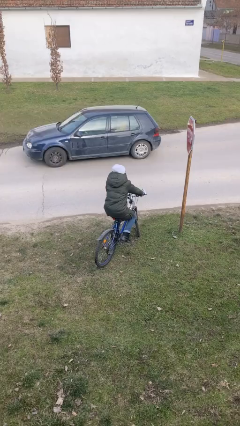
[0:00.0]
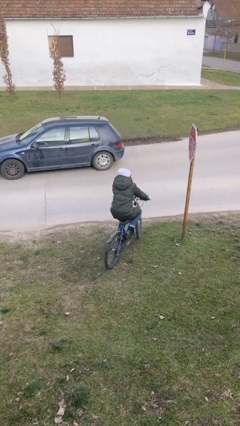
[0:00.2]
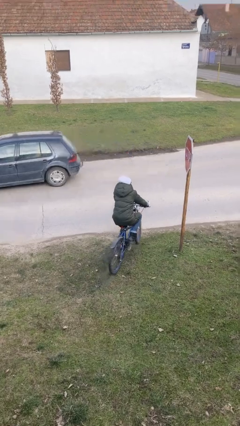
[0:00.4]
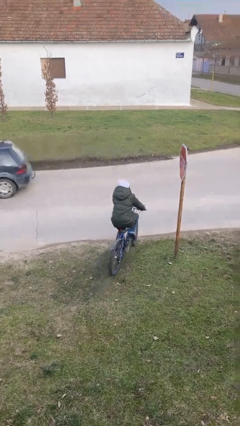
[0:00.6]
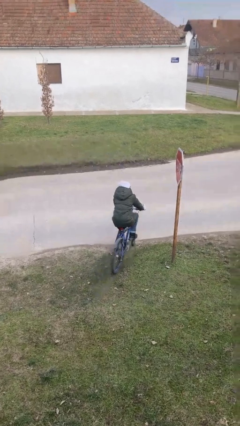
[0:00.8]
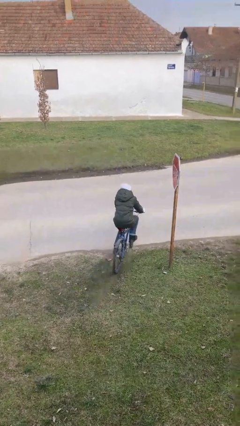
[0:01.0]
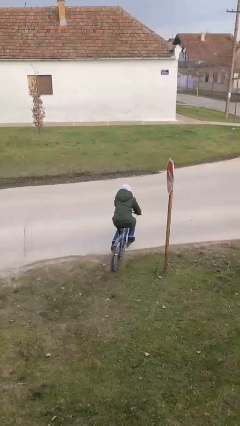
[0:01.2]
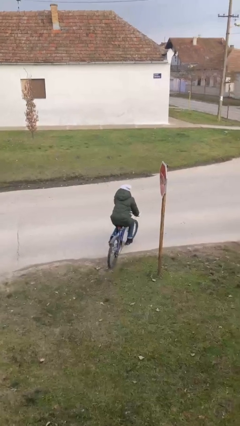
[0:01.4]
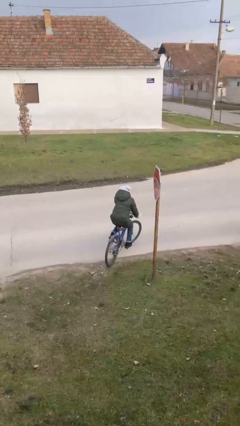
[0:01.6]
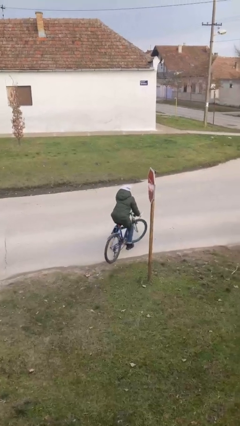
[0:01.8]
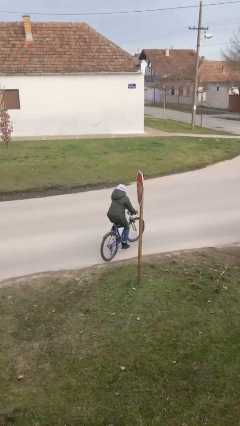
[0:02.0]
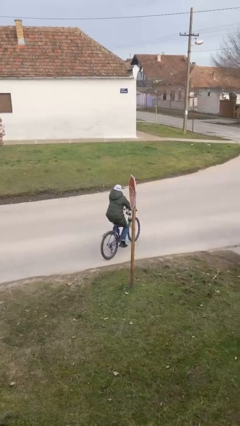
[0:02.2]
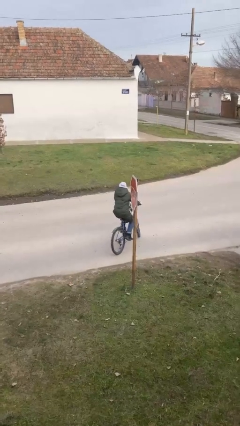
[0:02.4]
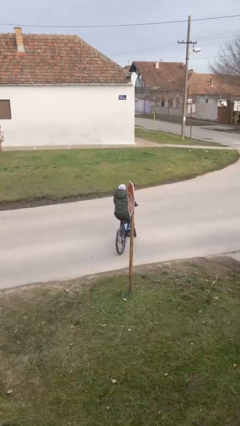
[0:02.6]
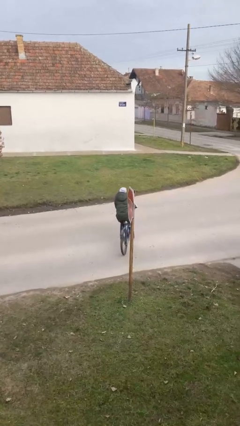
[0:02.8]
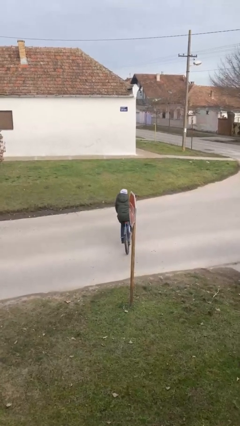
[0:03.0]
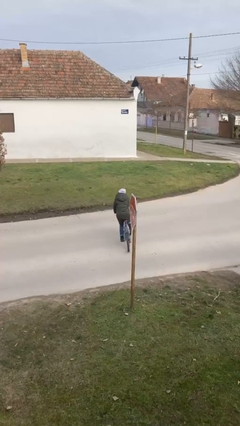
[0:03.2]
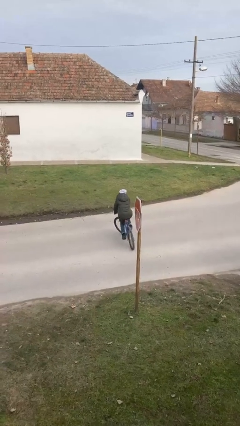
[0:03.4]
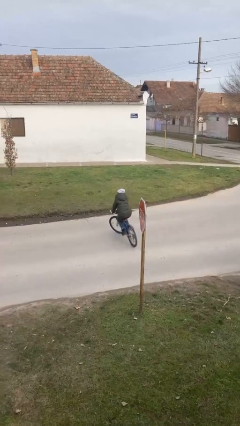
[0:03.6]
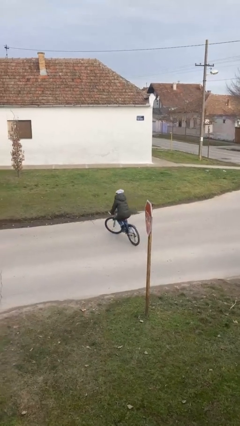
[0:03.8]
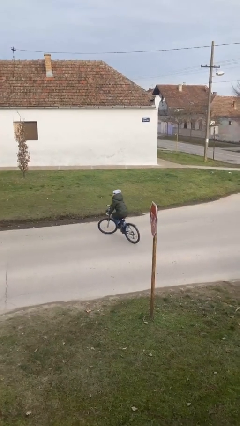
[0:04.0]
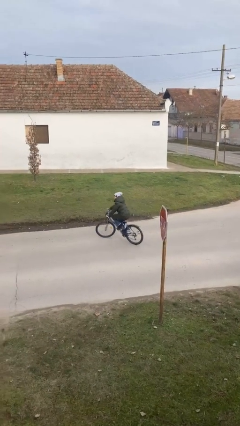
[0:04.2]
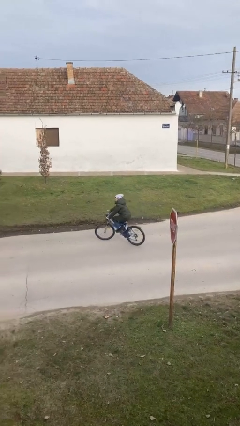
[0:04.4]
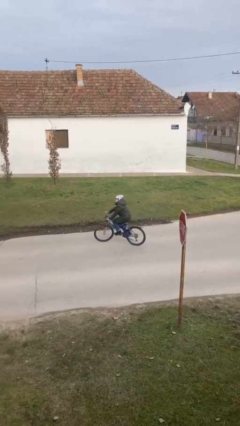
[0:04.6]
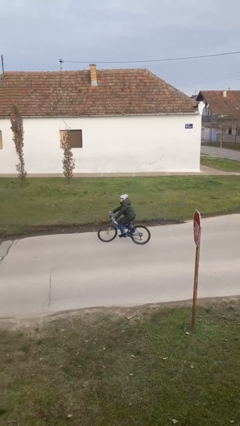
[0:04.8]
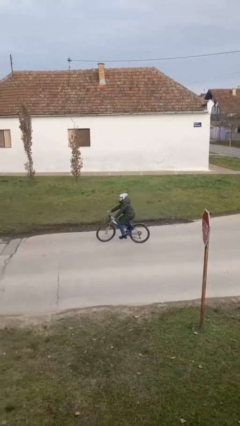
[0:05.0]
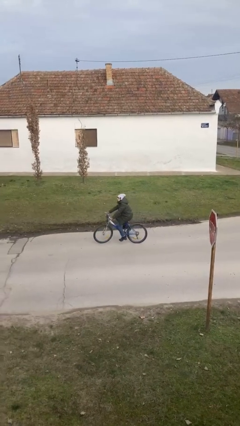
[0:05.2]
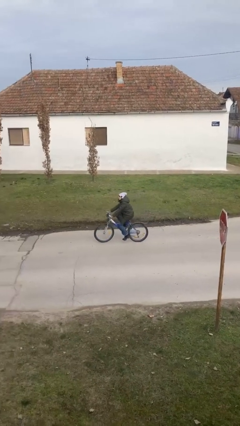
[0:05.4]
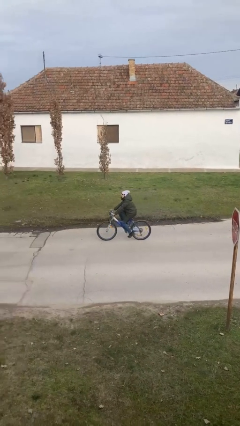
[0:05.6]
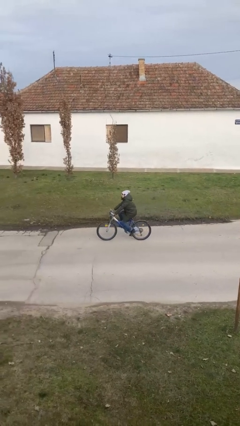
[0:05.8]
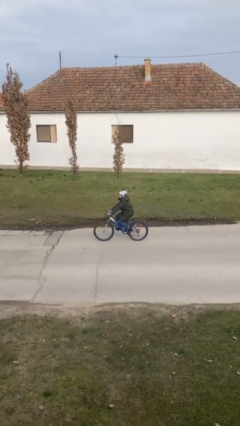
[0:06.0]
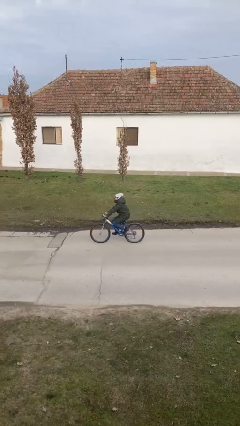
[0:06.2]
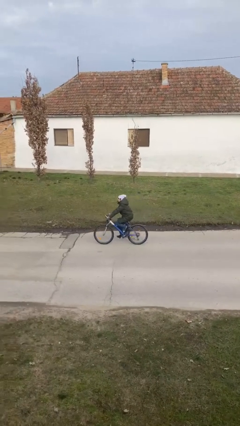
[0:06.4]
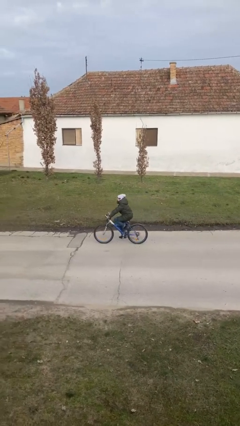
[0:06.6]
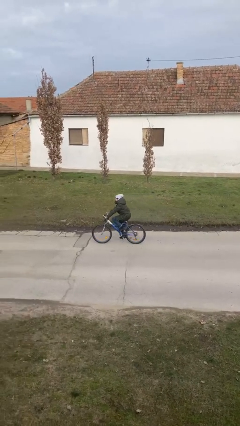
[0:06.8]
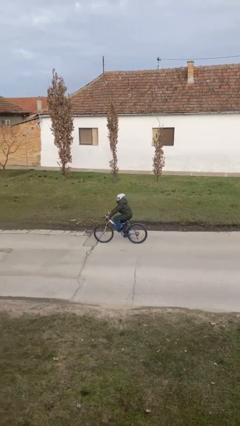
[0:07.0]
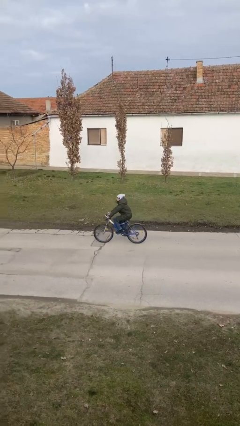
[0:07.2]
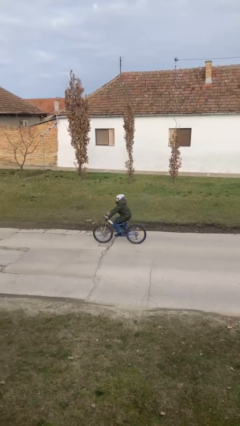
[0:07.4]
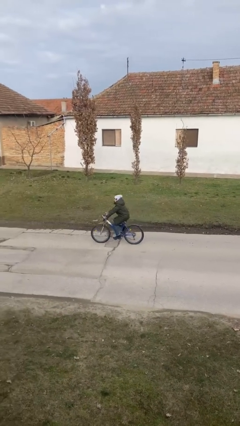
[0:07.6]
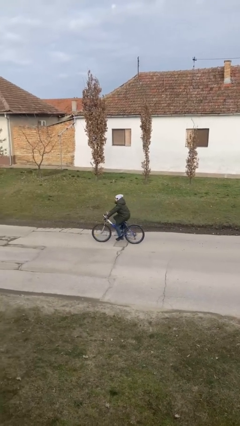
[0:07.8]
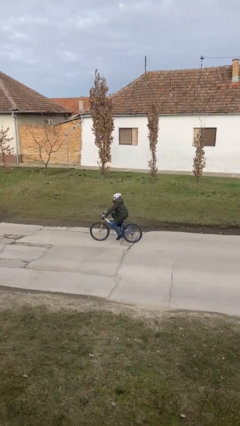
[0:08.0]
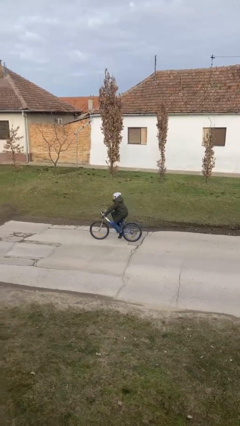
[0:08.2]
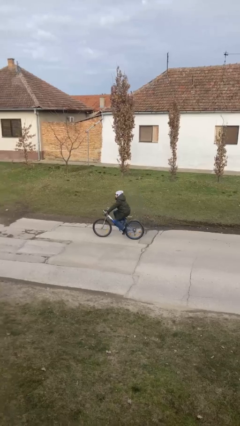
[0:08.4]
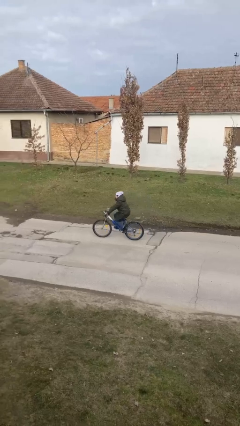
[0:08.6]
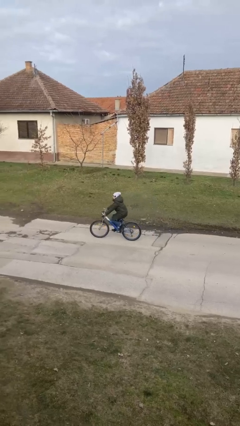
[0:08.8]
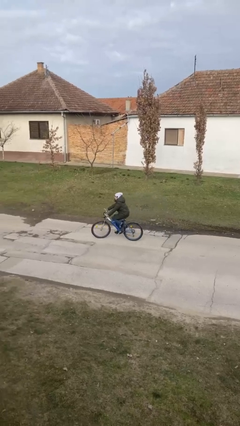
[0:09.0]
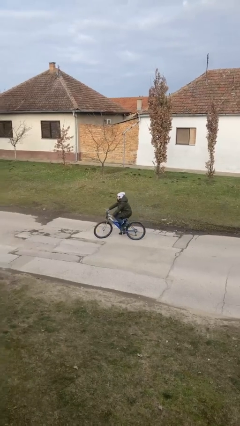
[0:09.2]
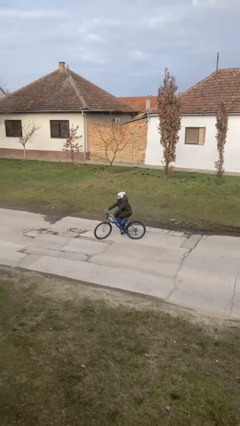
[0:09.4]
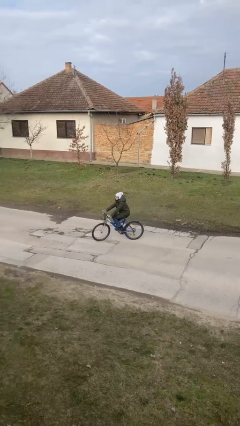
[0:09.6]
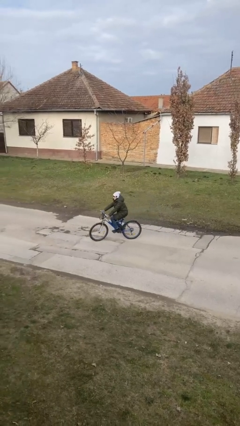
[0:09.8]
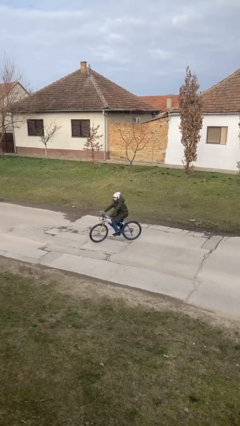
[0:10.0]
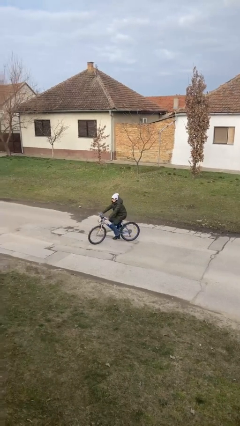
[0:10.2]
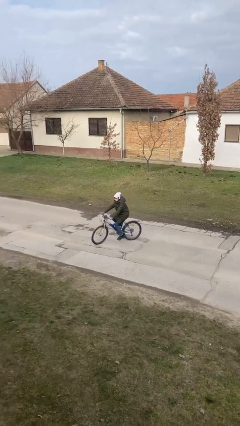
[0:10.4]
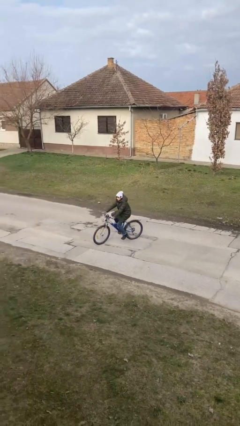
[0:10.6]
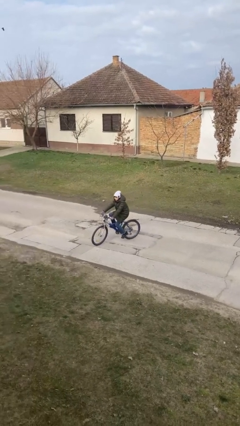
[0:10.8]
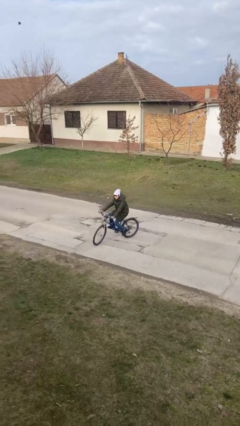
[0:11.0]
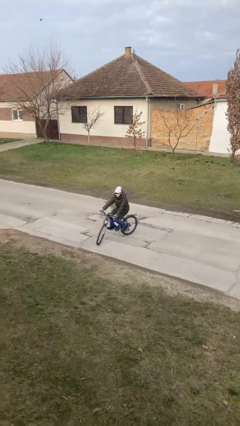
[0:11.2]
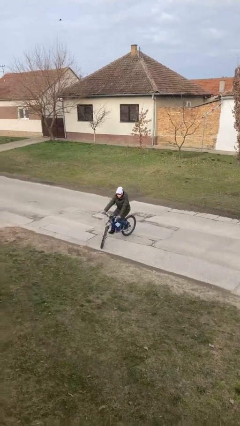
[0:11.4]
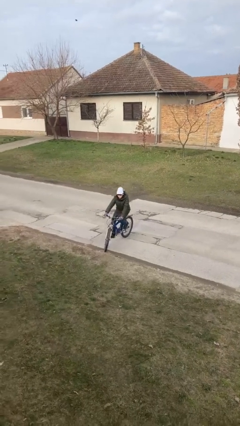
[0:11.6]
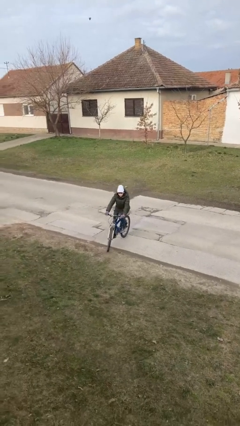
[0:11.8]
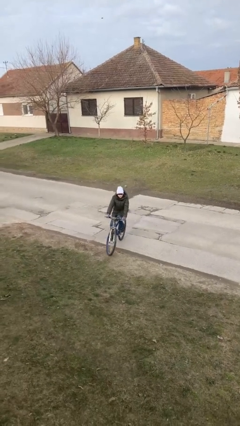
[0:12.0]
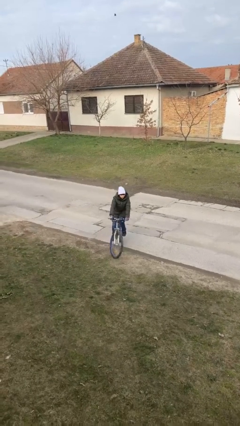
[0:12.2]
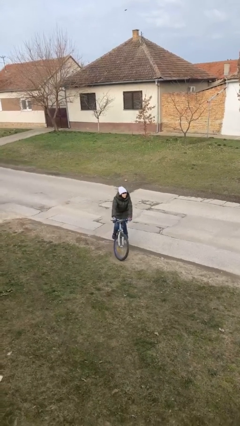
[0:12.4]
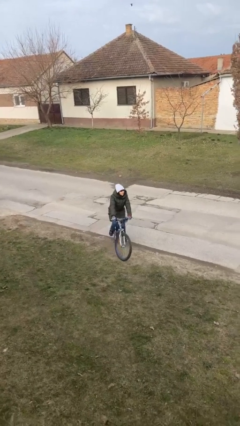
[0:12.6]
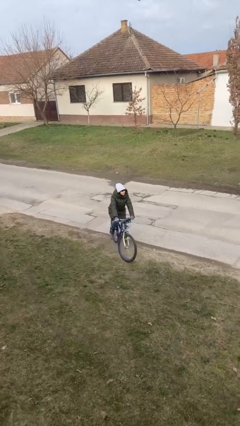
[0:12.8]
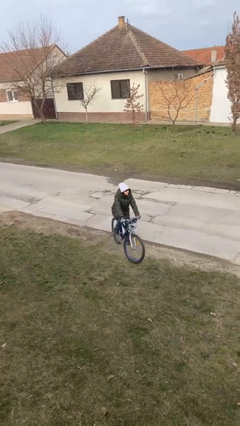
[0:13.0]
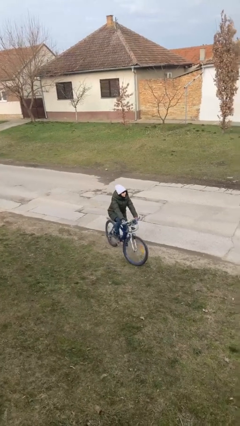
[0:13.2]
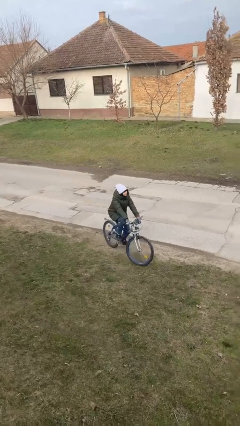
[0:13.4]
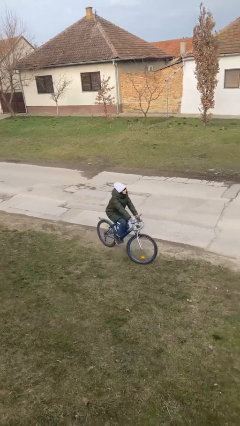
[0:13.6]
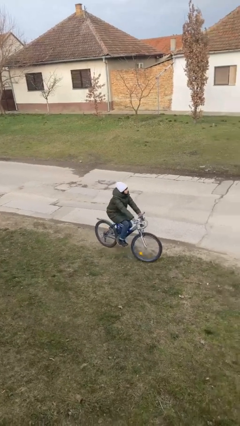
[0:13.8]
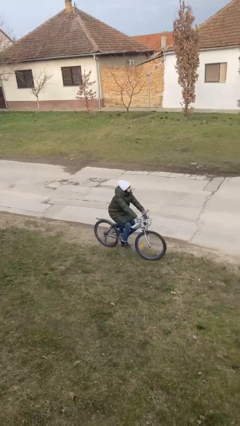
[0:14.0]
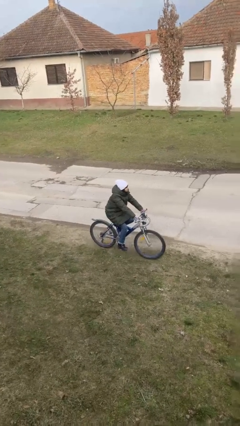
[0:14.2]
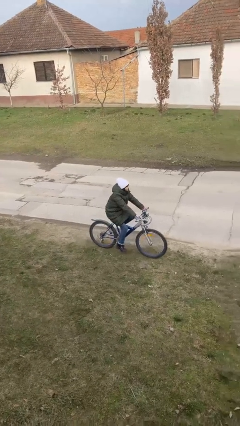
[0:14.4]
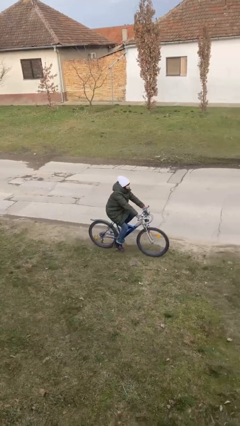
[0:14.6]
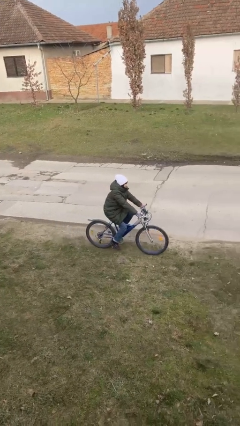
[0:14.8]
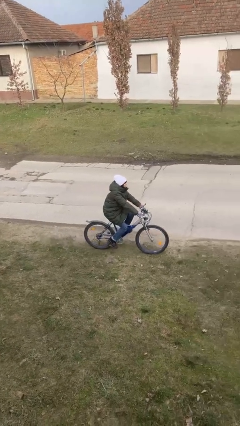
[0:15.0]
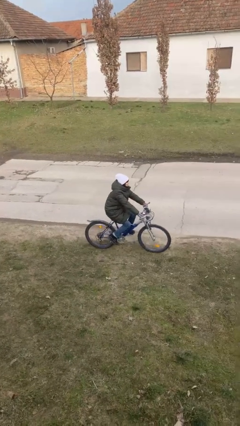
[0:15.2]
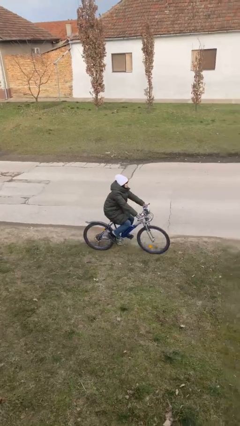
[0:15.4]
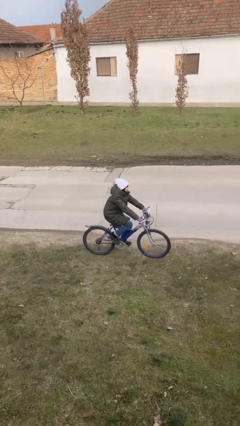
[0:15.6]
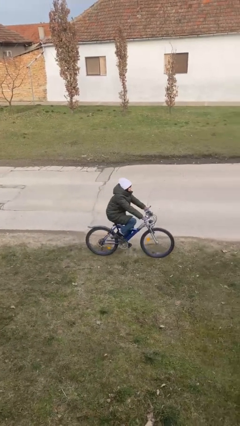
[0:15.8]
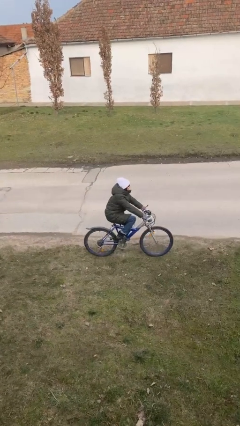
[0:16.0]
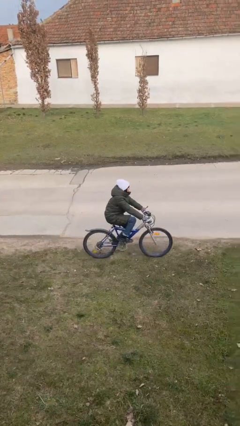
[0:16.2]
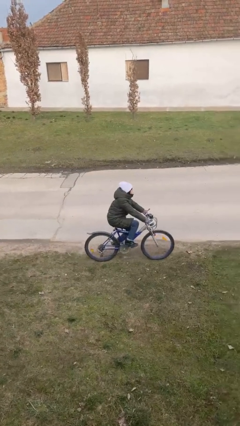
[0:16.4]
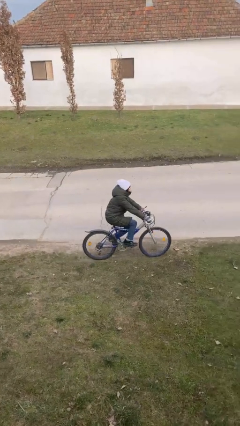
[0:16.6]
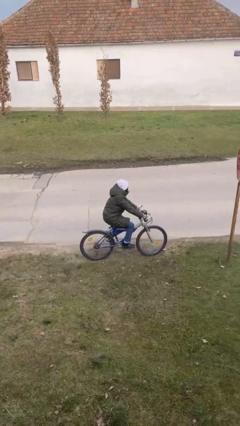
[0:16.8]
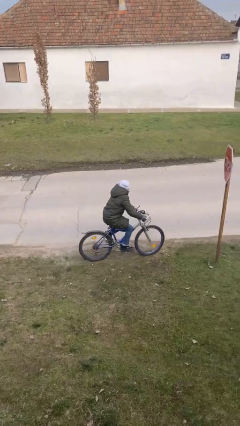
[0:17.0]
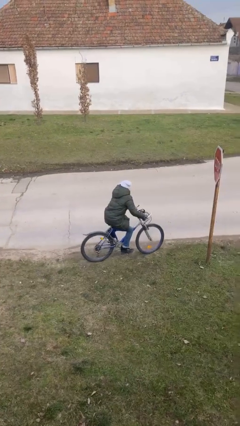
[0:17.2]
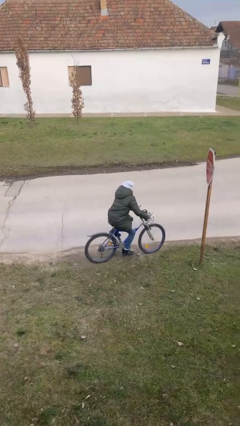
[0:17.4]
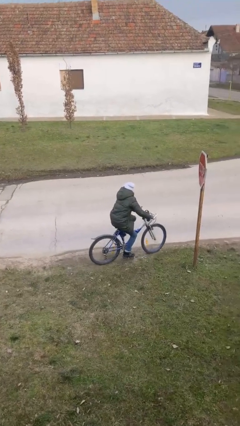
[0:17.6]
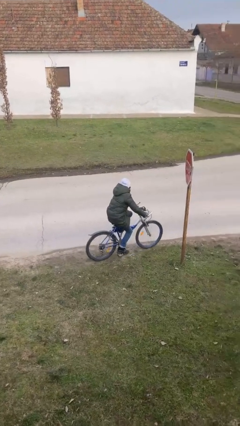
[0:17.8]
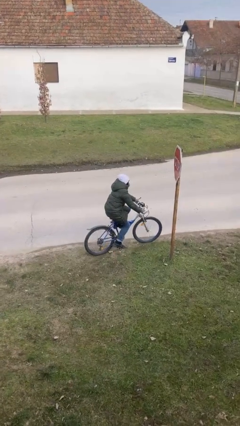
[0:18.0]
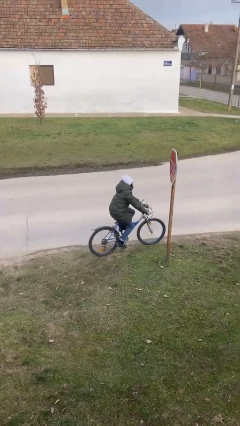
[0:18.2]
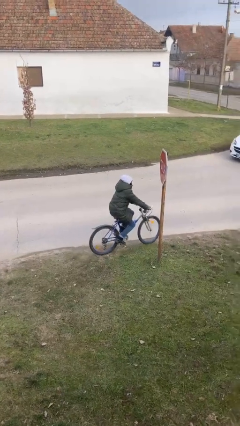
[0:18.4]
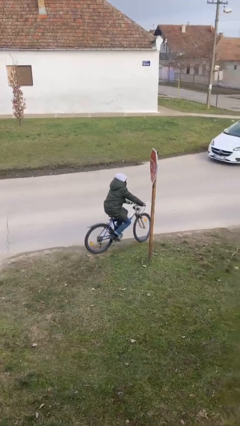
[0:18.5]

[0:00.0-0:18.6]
person rides bicycle
